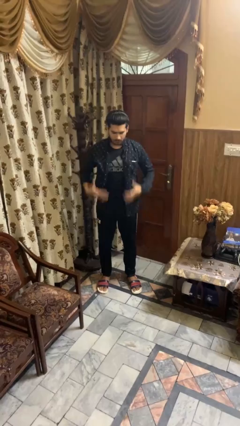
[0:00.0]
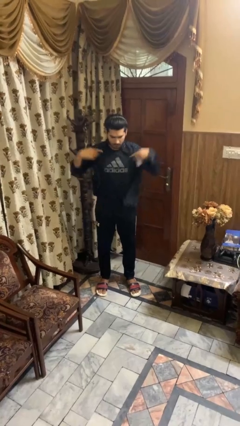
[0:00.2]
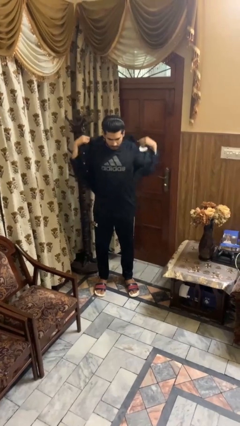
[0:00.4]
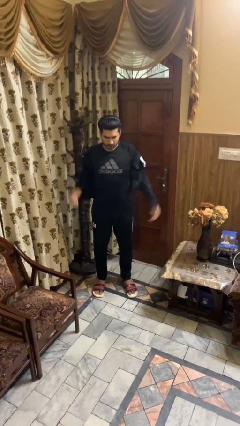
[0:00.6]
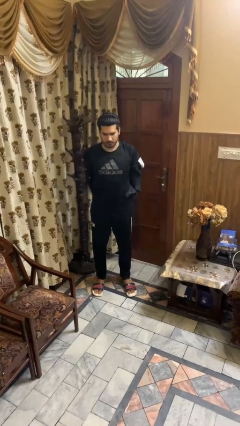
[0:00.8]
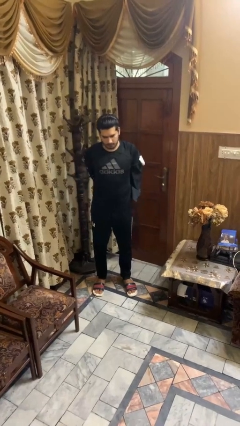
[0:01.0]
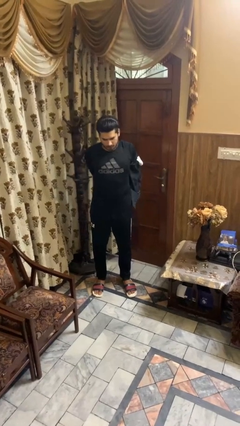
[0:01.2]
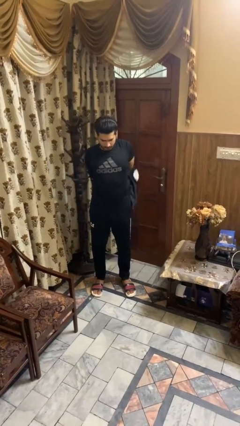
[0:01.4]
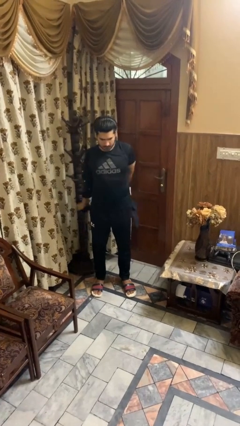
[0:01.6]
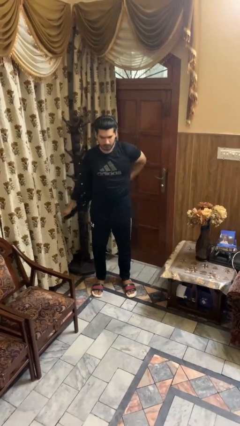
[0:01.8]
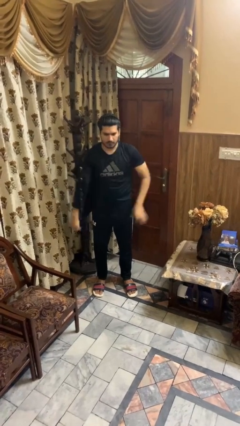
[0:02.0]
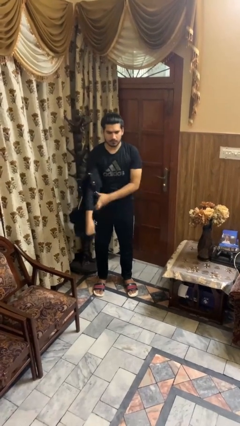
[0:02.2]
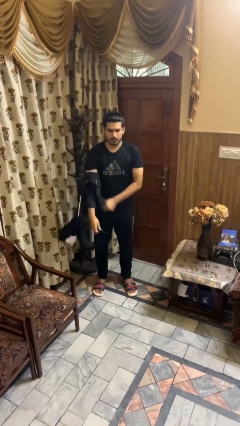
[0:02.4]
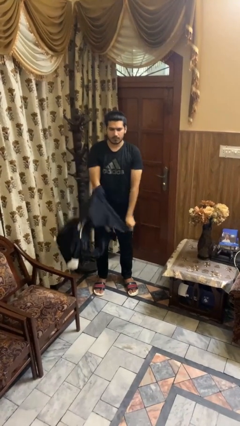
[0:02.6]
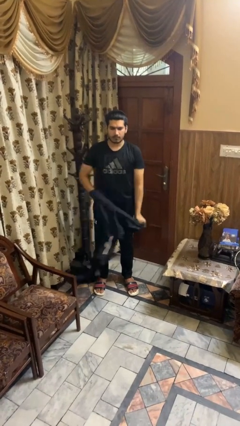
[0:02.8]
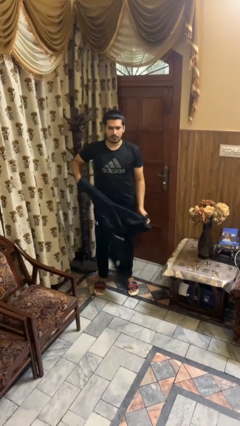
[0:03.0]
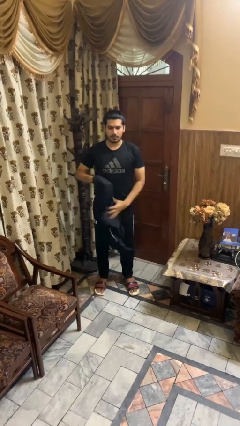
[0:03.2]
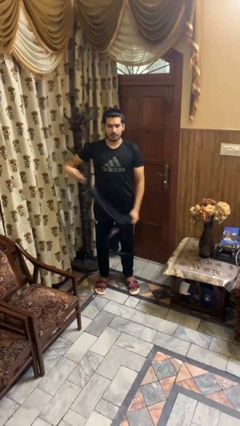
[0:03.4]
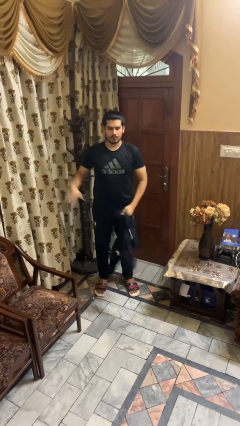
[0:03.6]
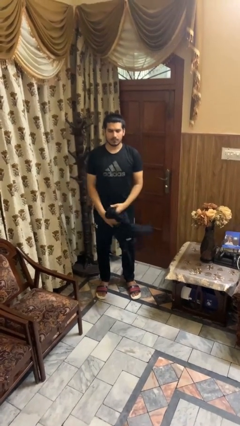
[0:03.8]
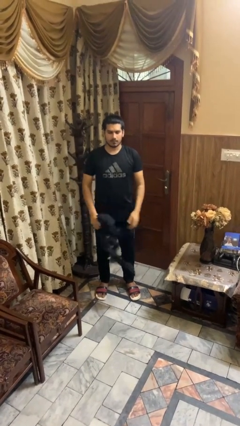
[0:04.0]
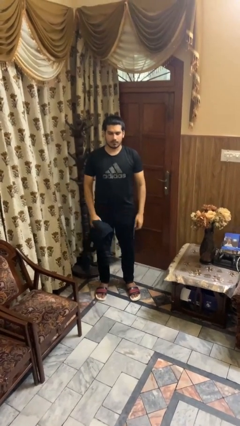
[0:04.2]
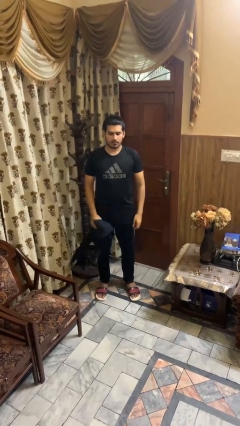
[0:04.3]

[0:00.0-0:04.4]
person takes off shirt

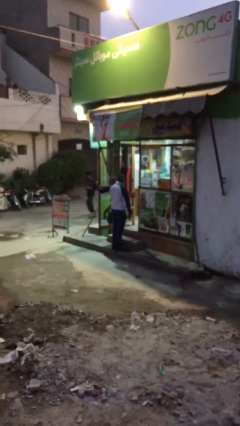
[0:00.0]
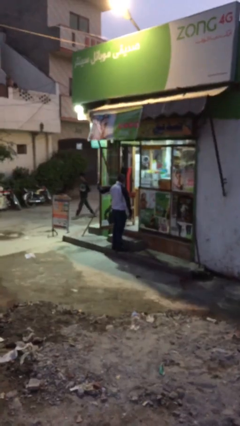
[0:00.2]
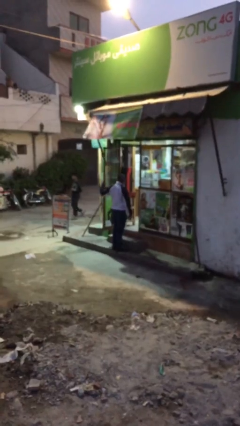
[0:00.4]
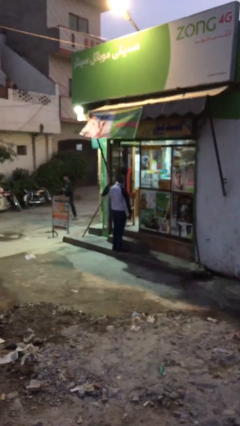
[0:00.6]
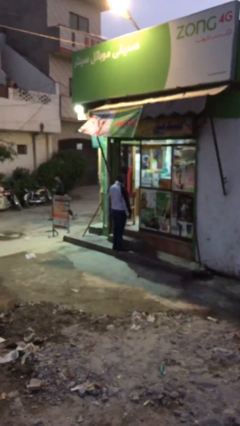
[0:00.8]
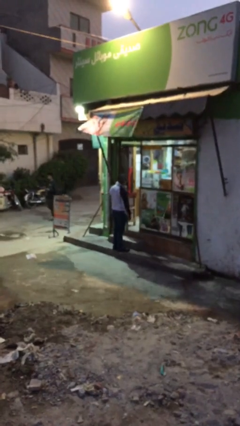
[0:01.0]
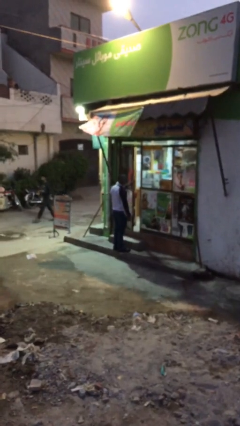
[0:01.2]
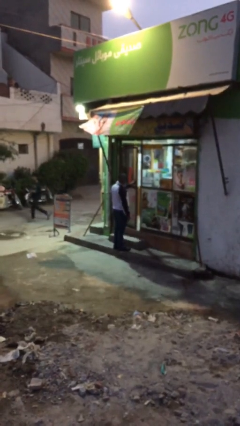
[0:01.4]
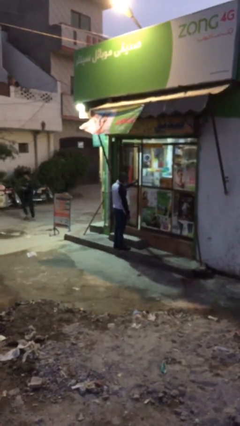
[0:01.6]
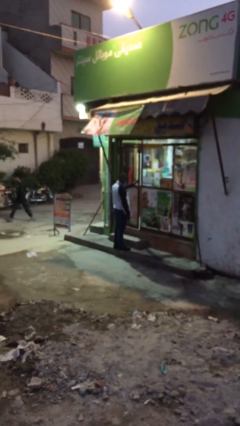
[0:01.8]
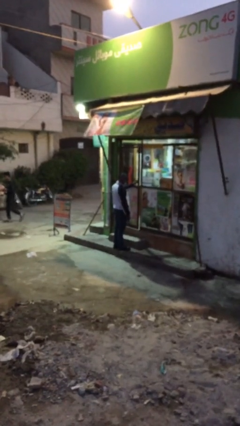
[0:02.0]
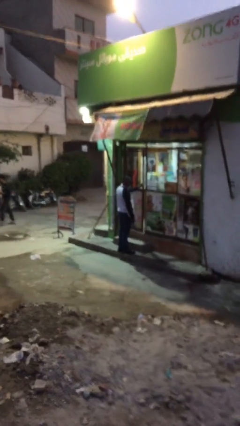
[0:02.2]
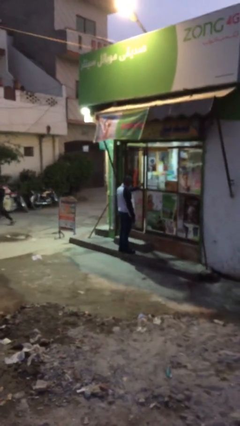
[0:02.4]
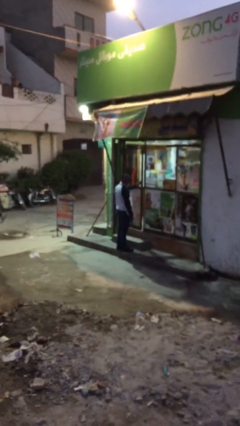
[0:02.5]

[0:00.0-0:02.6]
person closes facility door

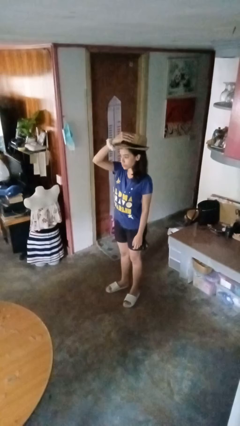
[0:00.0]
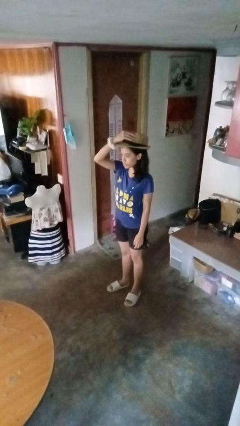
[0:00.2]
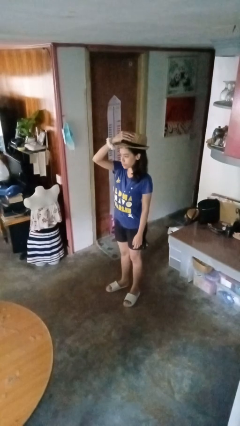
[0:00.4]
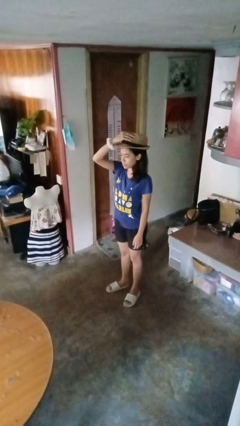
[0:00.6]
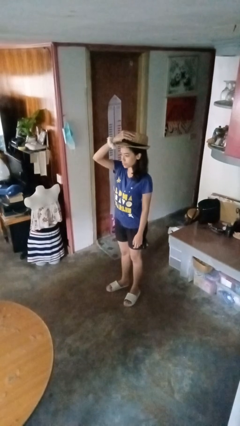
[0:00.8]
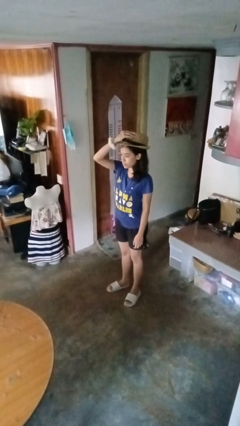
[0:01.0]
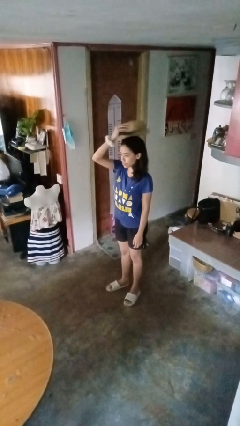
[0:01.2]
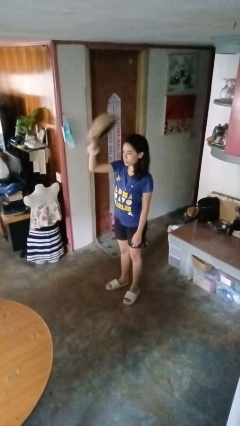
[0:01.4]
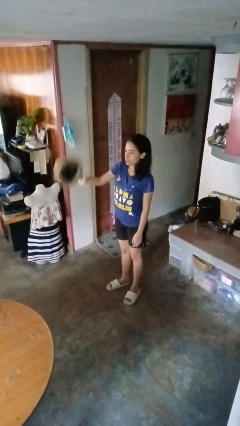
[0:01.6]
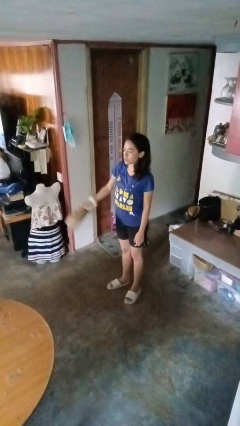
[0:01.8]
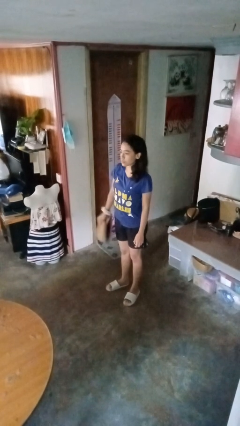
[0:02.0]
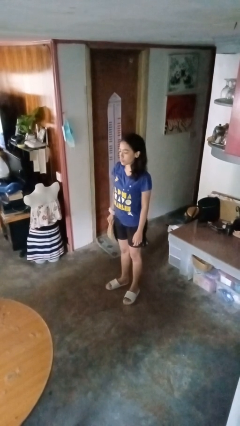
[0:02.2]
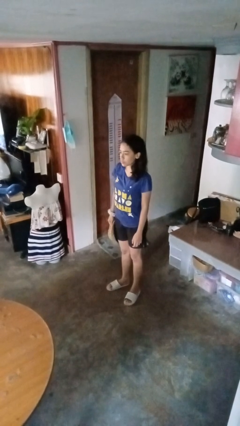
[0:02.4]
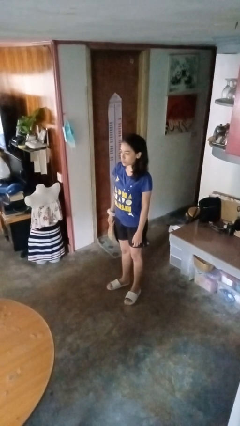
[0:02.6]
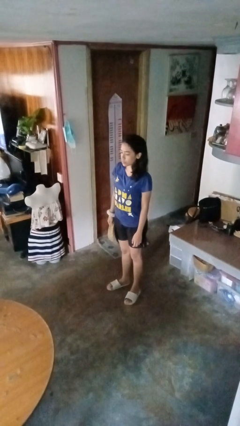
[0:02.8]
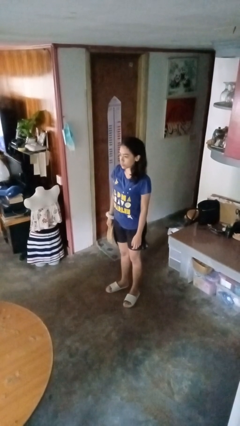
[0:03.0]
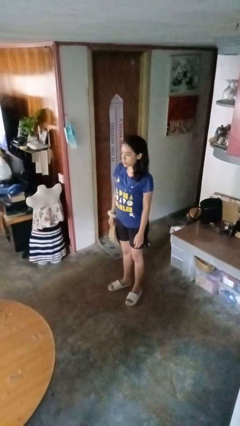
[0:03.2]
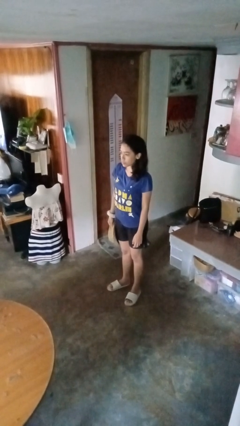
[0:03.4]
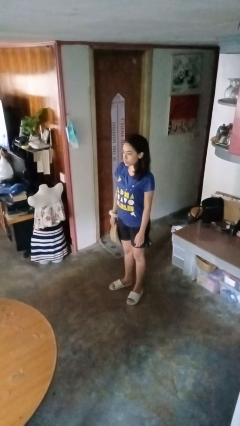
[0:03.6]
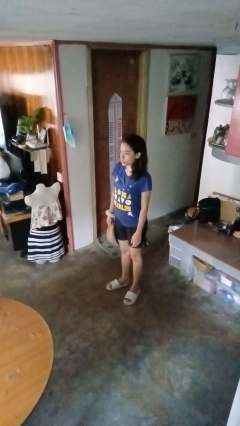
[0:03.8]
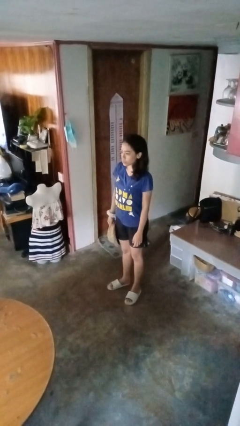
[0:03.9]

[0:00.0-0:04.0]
person takes off hat

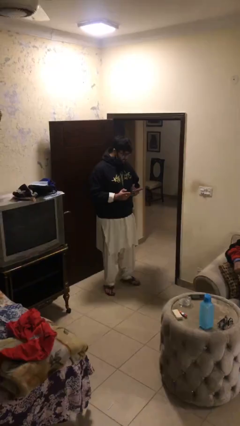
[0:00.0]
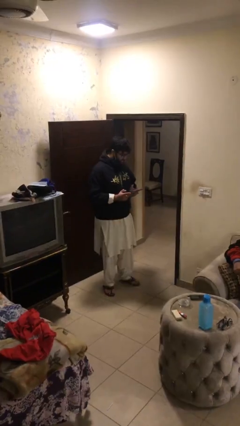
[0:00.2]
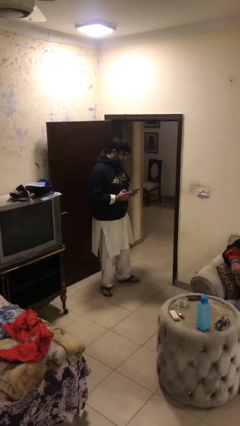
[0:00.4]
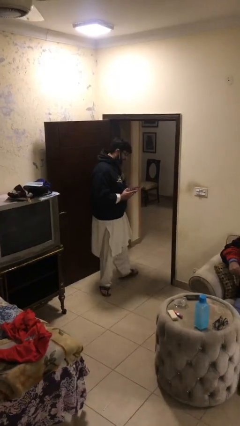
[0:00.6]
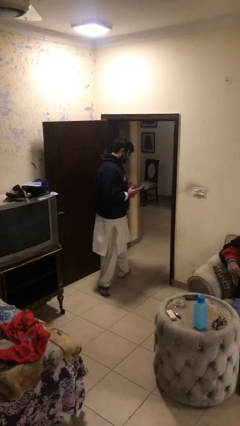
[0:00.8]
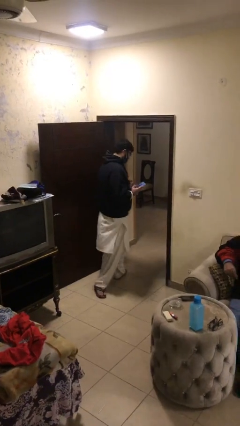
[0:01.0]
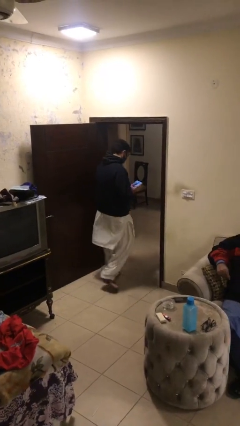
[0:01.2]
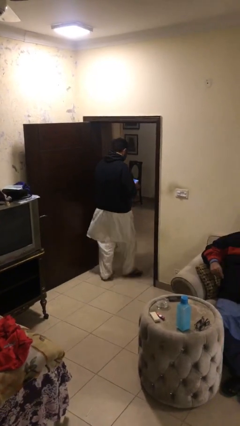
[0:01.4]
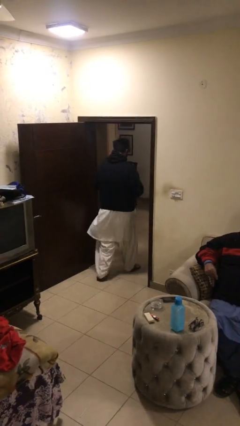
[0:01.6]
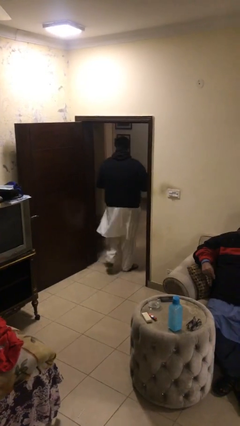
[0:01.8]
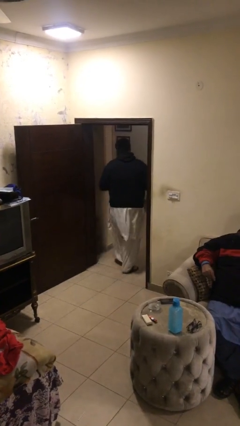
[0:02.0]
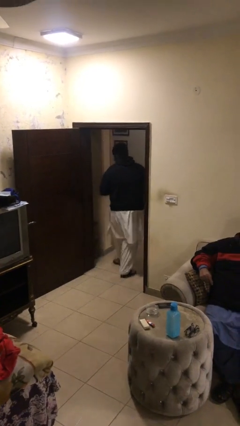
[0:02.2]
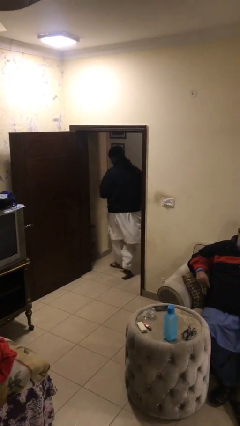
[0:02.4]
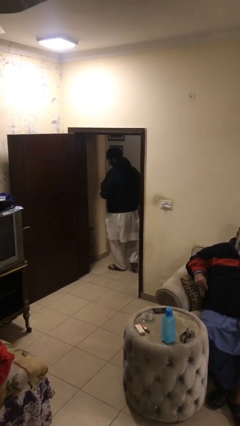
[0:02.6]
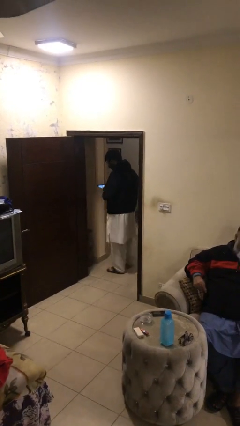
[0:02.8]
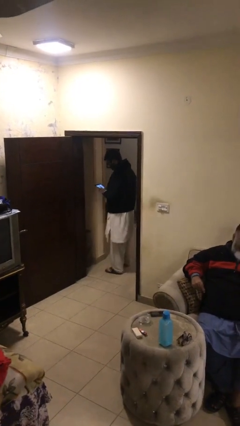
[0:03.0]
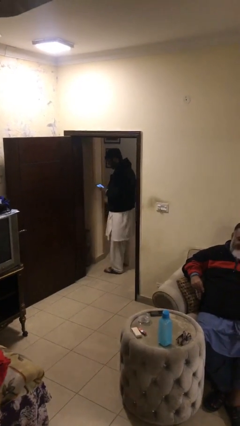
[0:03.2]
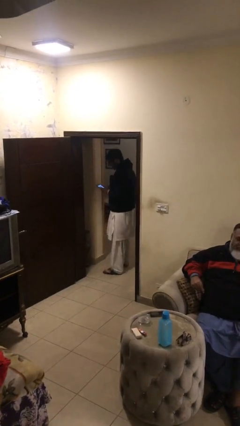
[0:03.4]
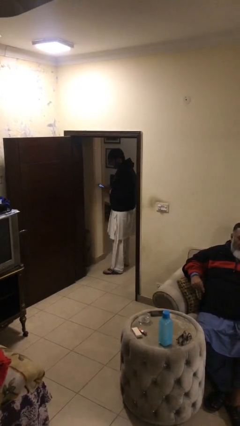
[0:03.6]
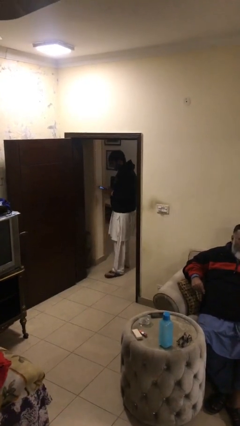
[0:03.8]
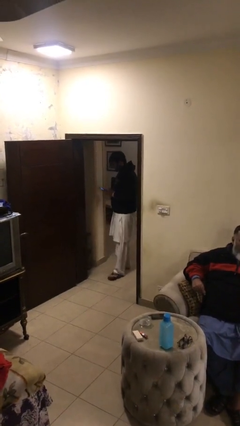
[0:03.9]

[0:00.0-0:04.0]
person exits scene through structure

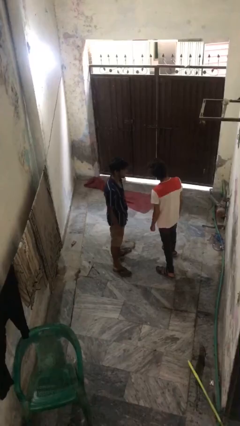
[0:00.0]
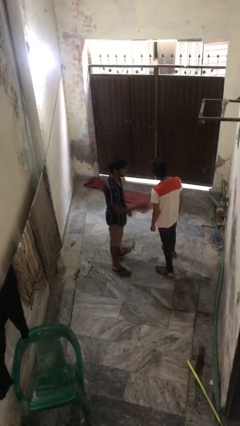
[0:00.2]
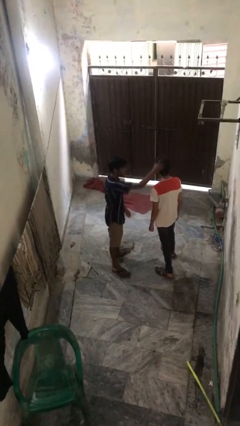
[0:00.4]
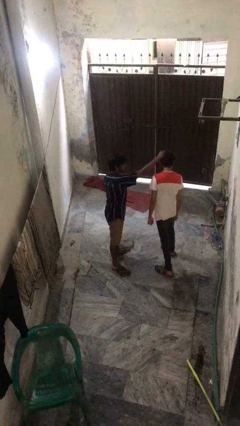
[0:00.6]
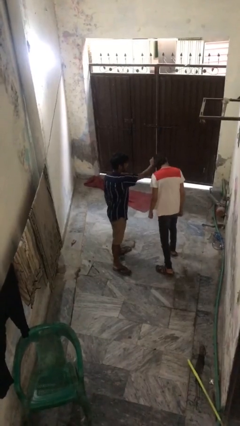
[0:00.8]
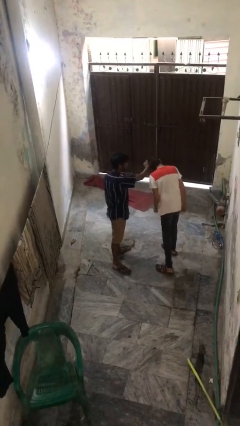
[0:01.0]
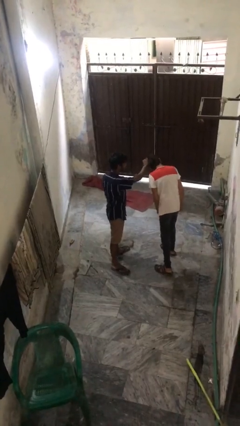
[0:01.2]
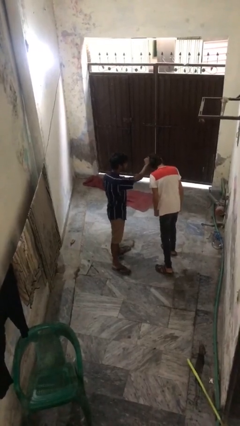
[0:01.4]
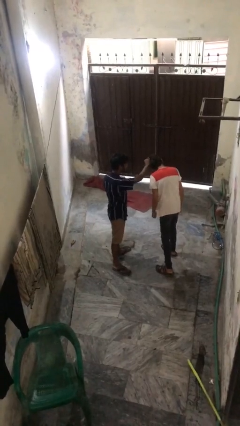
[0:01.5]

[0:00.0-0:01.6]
person grabs person by hair

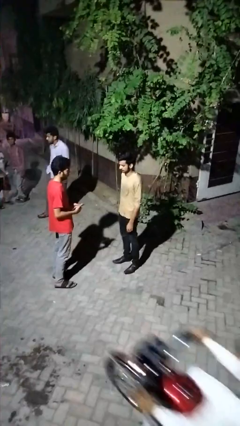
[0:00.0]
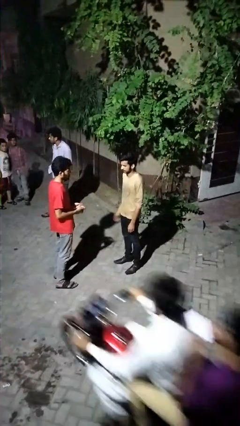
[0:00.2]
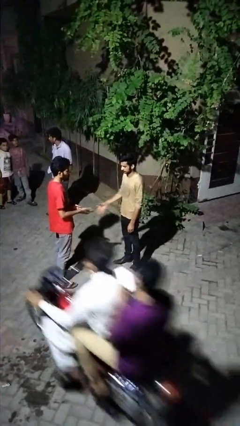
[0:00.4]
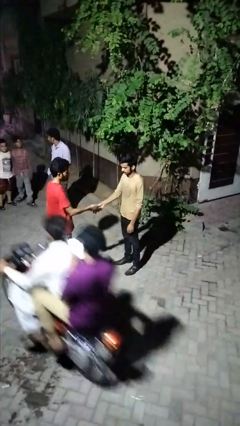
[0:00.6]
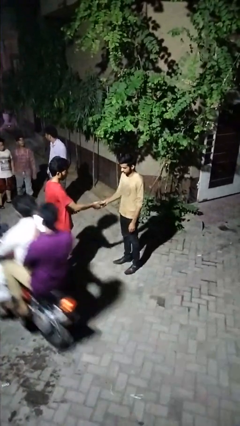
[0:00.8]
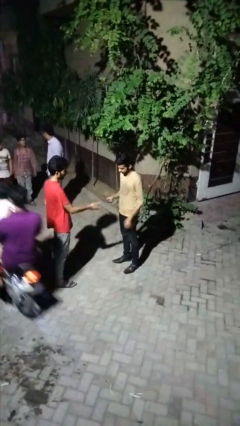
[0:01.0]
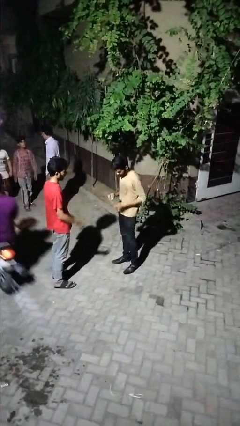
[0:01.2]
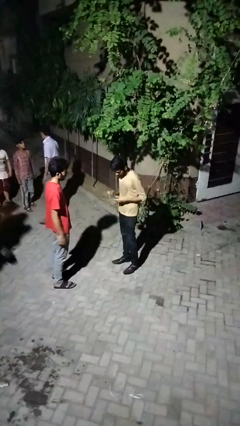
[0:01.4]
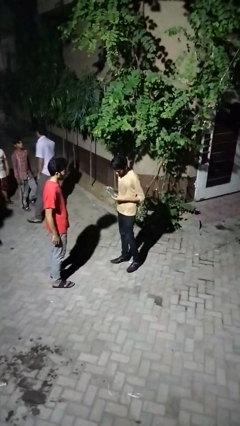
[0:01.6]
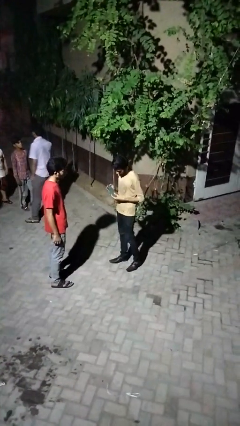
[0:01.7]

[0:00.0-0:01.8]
person transfers object to person
